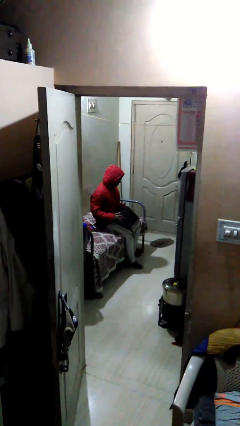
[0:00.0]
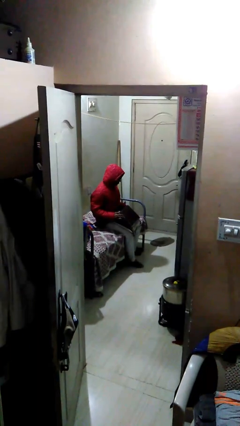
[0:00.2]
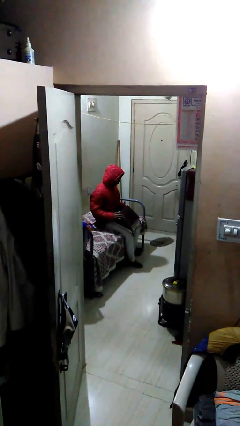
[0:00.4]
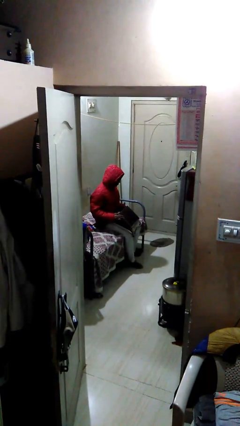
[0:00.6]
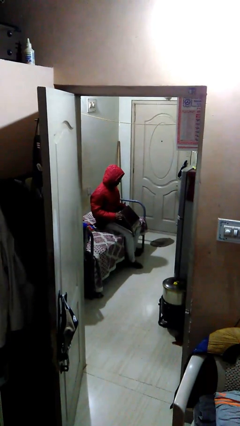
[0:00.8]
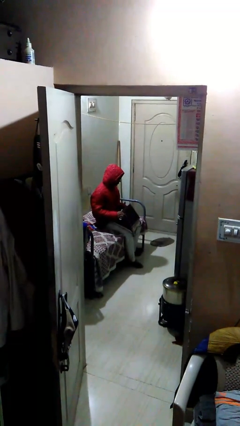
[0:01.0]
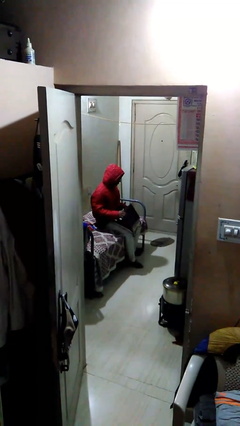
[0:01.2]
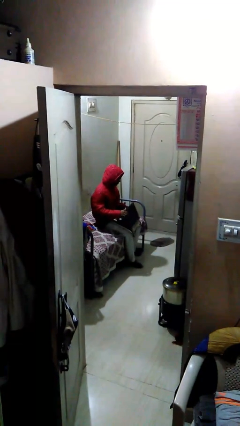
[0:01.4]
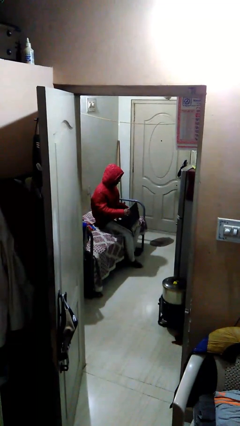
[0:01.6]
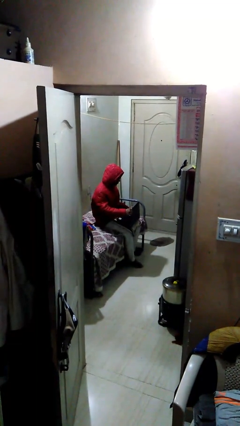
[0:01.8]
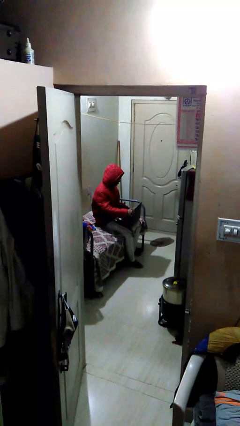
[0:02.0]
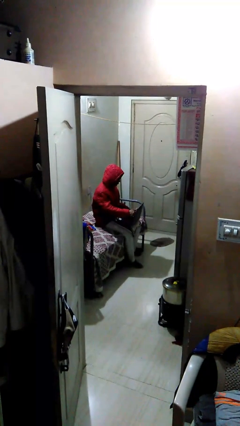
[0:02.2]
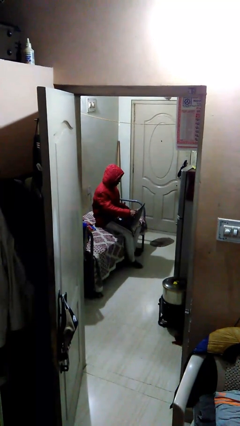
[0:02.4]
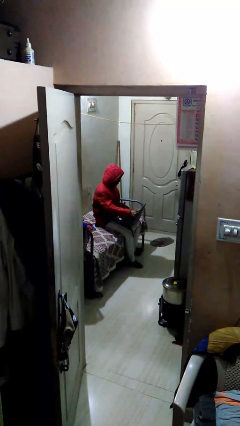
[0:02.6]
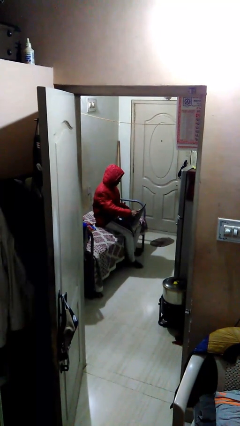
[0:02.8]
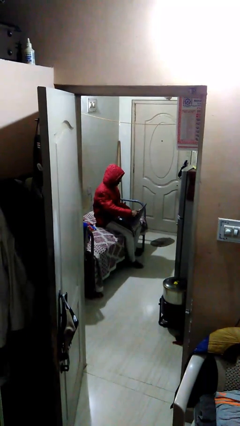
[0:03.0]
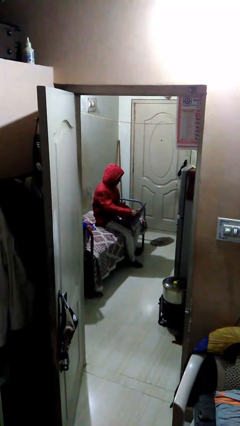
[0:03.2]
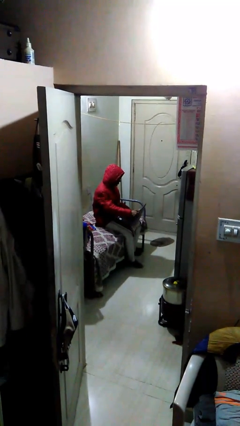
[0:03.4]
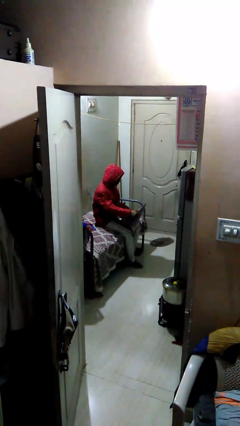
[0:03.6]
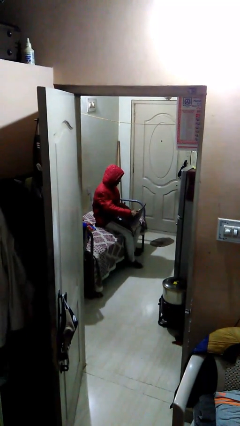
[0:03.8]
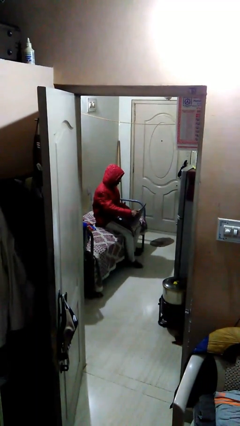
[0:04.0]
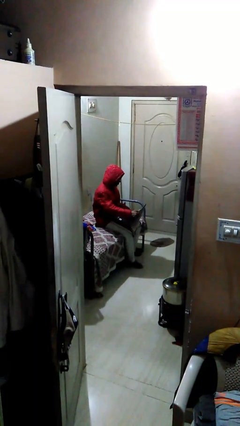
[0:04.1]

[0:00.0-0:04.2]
person interacts with laptop

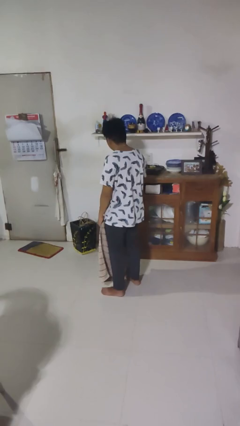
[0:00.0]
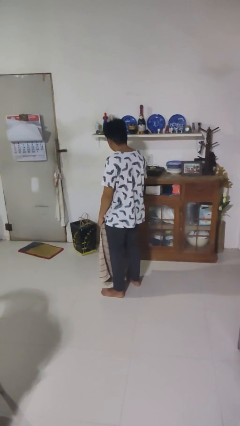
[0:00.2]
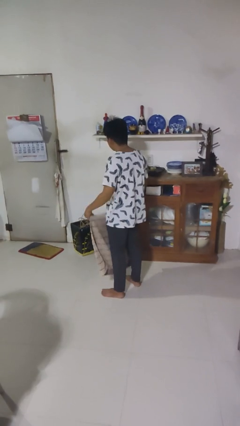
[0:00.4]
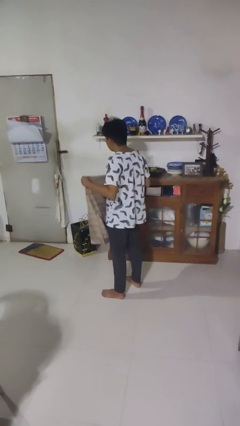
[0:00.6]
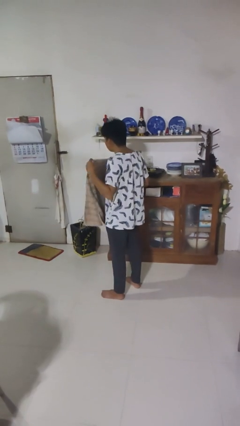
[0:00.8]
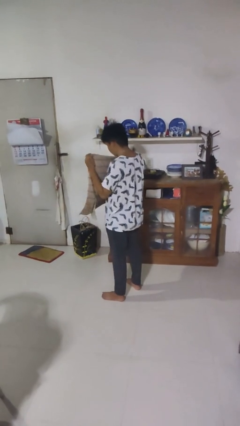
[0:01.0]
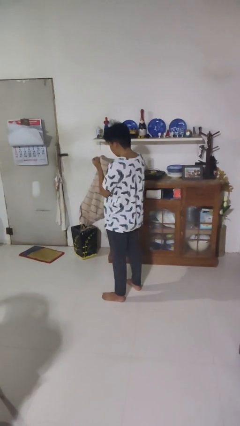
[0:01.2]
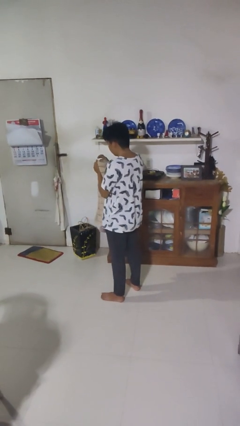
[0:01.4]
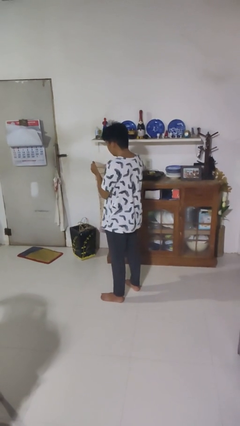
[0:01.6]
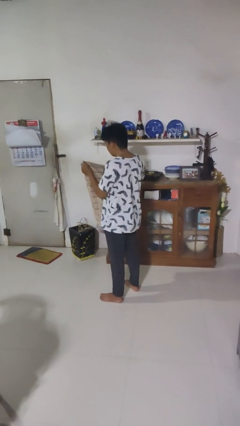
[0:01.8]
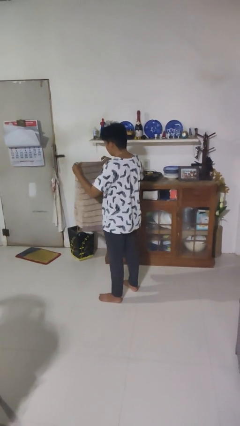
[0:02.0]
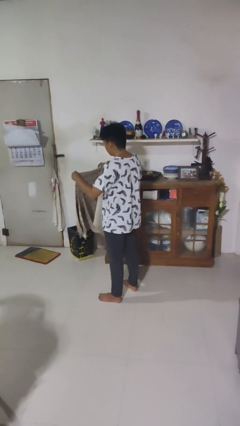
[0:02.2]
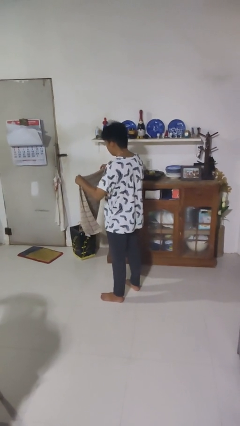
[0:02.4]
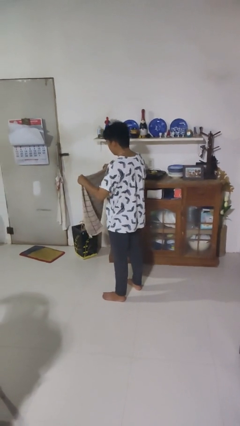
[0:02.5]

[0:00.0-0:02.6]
person folds blanket

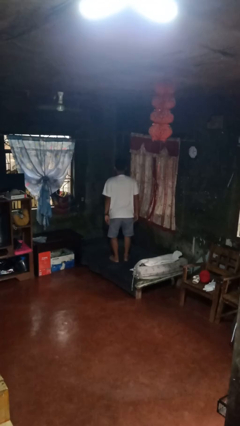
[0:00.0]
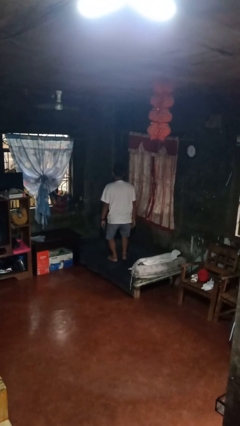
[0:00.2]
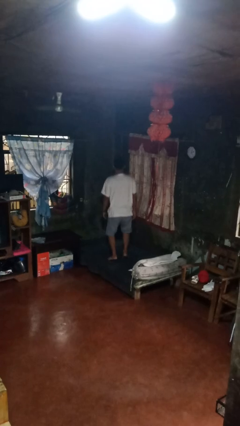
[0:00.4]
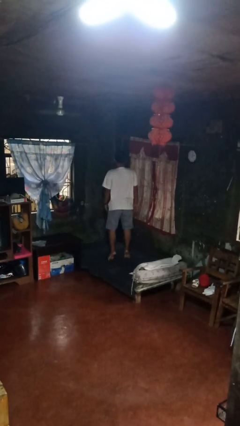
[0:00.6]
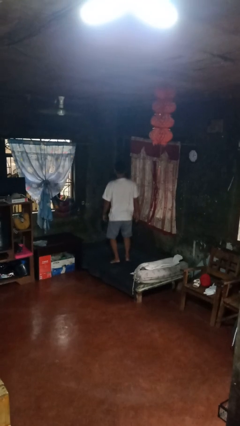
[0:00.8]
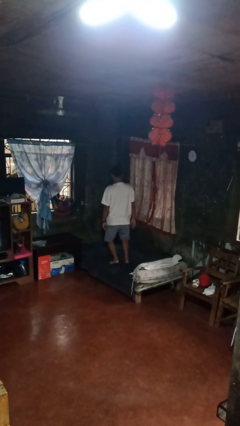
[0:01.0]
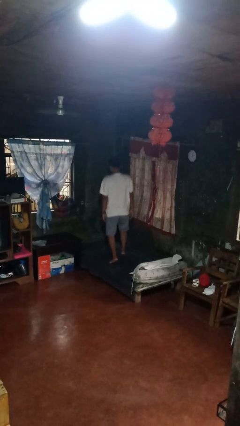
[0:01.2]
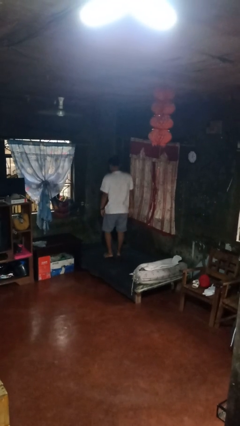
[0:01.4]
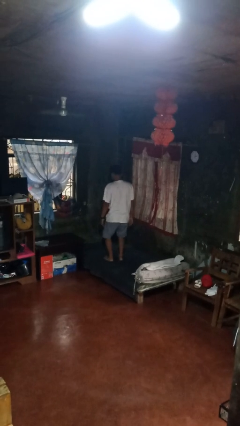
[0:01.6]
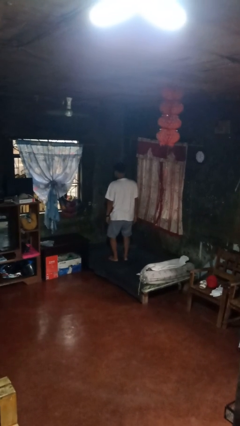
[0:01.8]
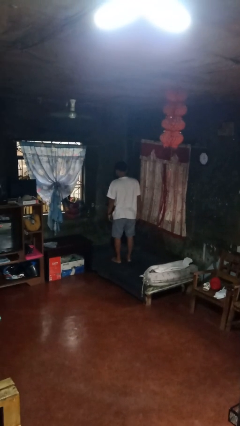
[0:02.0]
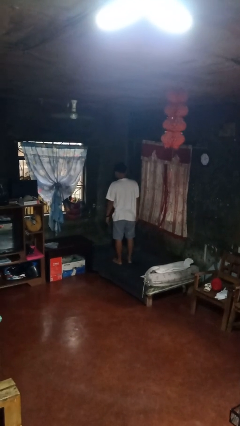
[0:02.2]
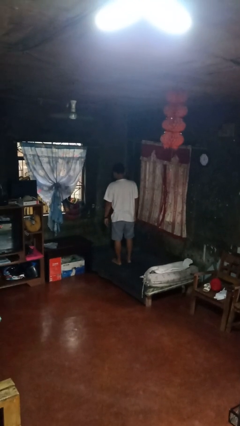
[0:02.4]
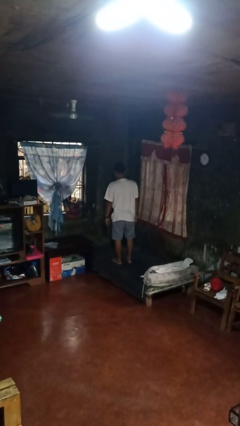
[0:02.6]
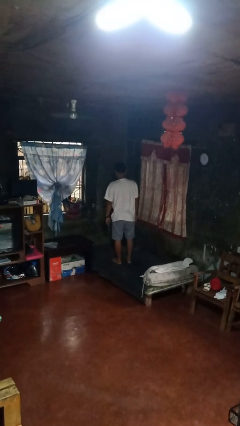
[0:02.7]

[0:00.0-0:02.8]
person jumps on bed

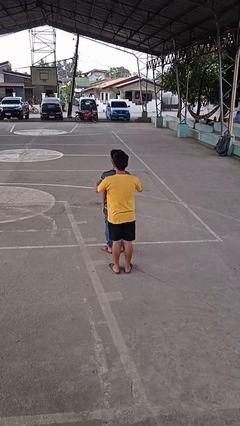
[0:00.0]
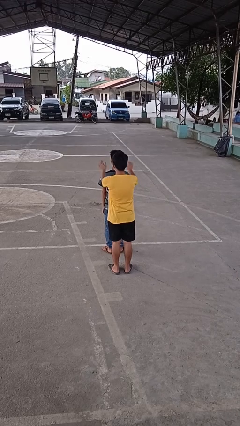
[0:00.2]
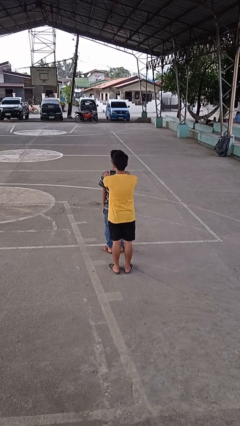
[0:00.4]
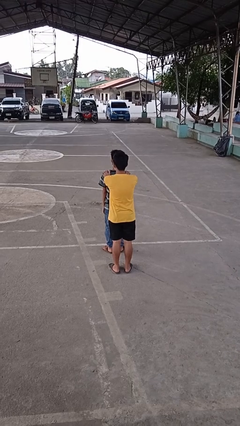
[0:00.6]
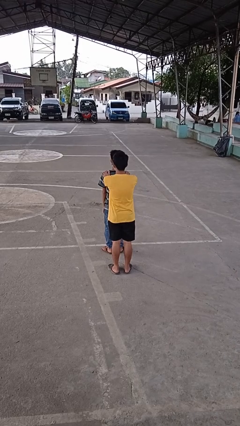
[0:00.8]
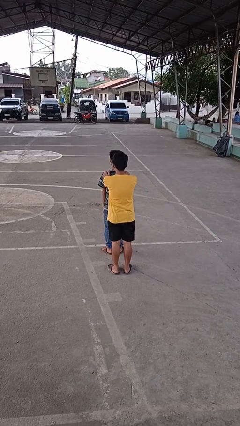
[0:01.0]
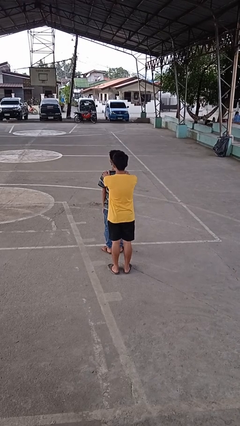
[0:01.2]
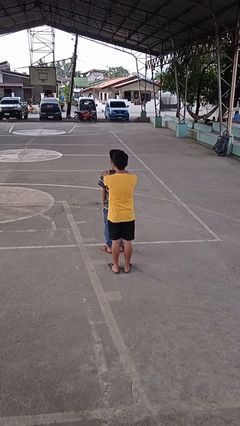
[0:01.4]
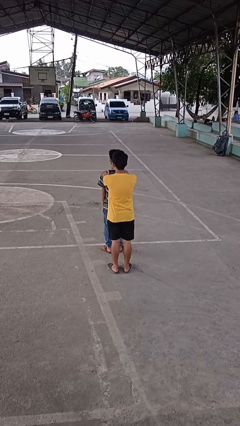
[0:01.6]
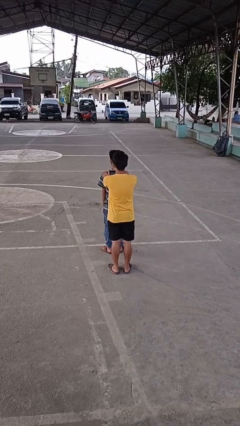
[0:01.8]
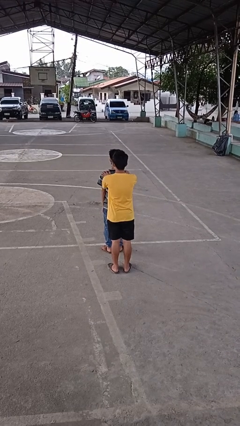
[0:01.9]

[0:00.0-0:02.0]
person grabs person by shoulder

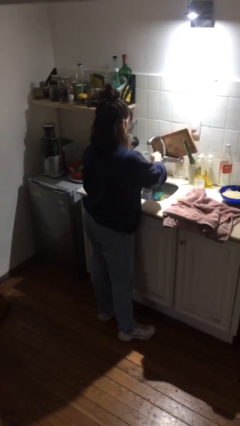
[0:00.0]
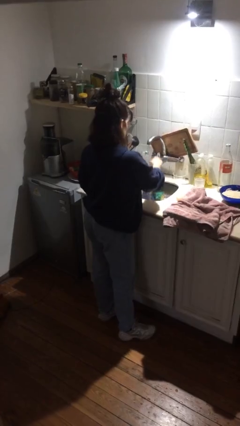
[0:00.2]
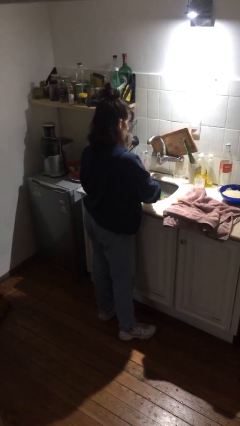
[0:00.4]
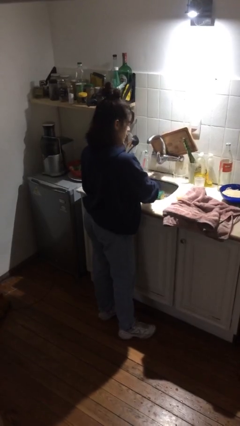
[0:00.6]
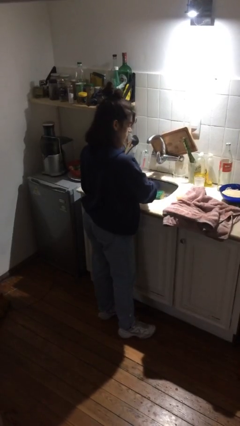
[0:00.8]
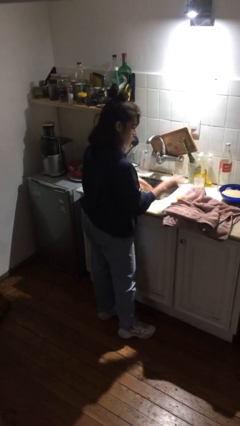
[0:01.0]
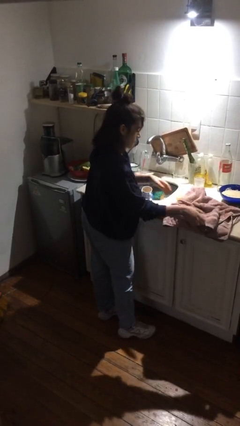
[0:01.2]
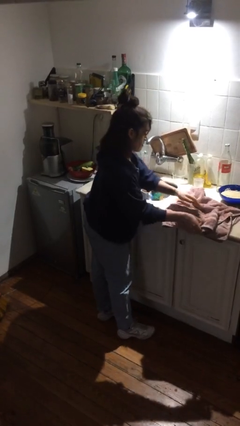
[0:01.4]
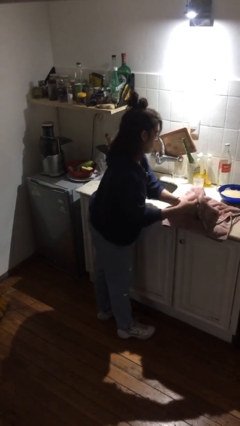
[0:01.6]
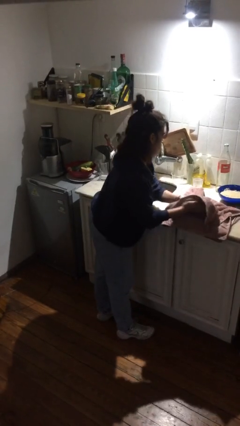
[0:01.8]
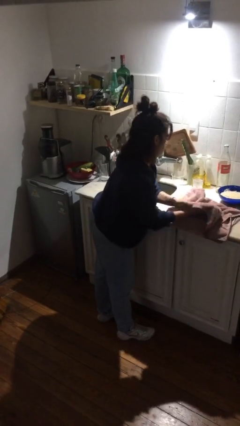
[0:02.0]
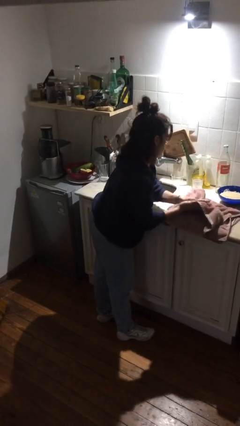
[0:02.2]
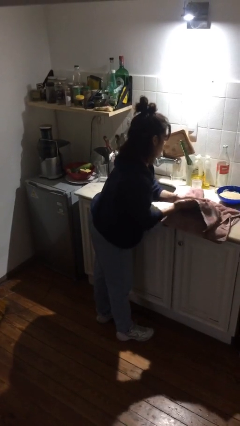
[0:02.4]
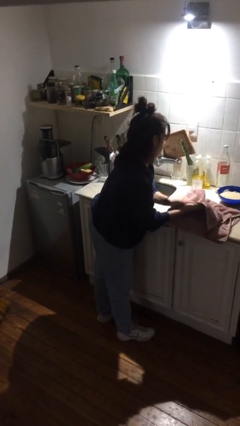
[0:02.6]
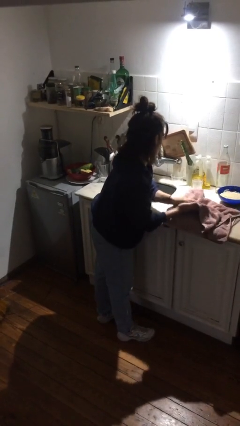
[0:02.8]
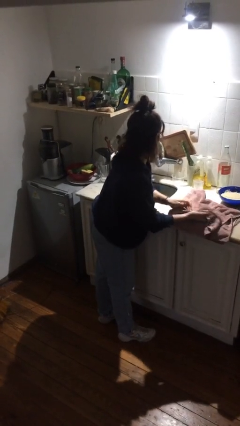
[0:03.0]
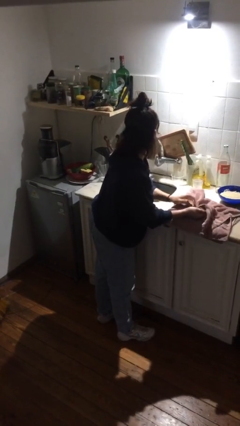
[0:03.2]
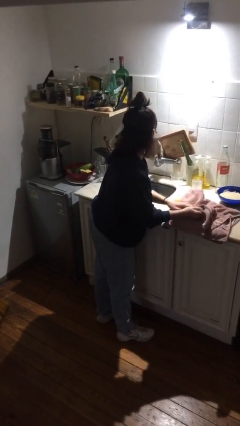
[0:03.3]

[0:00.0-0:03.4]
person dries hands with towel

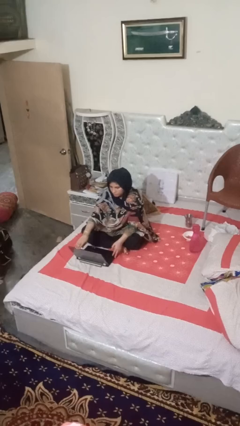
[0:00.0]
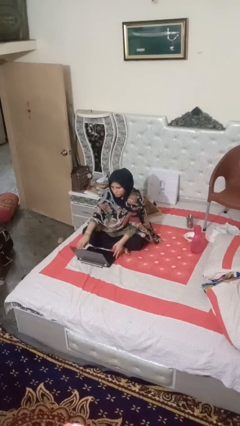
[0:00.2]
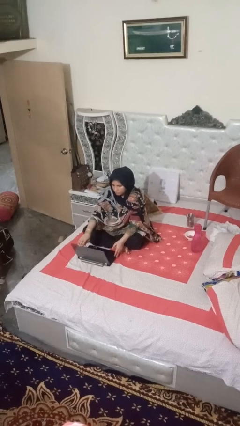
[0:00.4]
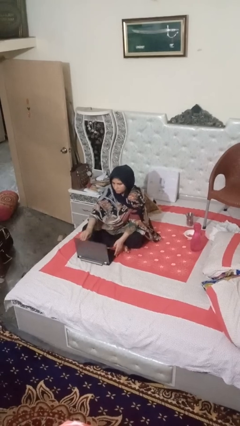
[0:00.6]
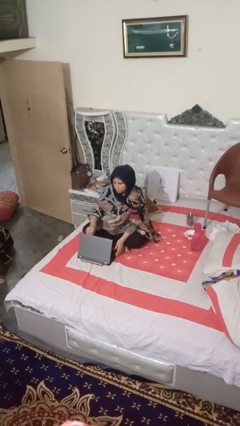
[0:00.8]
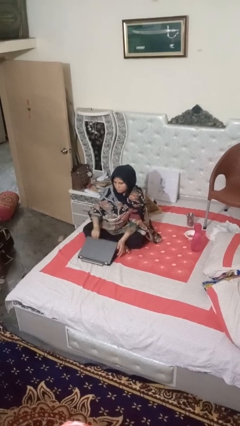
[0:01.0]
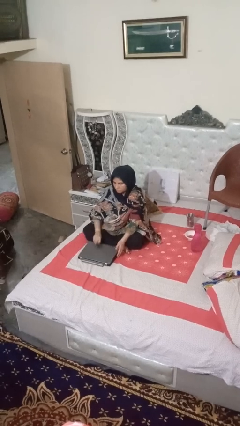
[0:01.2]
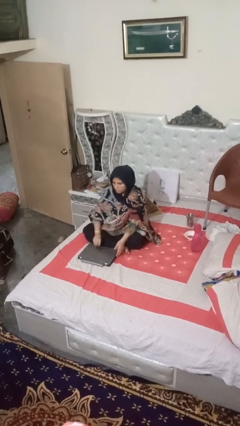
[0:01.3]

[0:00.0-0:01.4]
person closes laptop

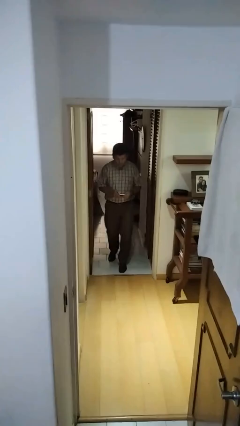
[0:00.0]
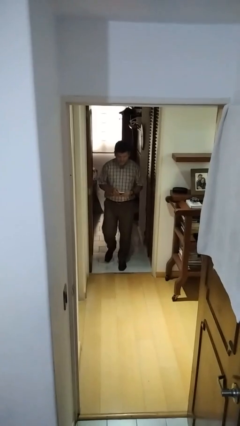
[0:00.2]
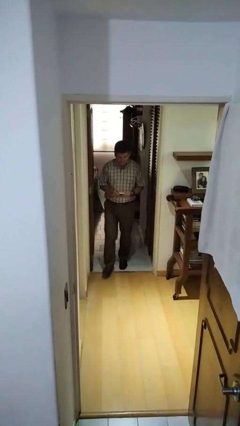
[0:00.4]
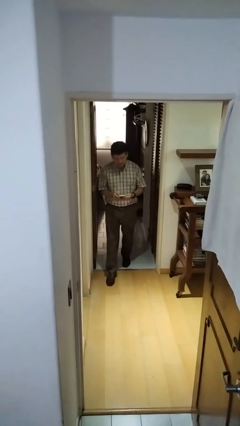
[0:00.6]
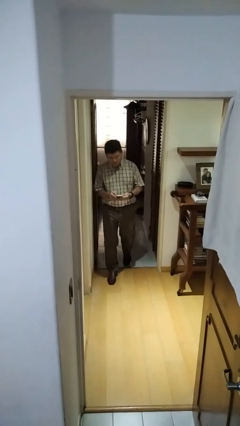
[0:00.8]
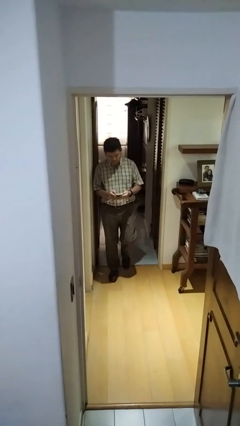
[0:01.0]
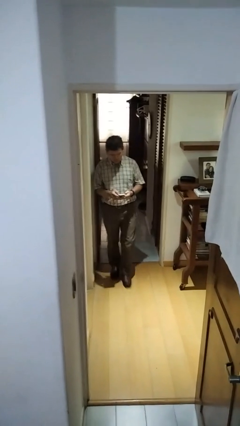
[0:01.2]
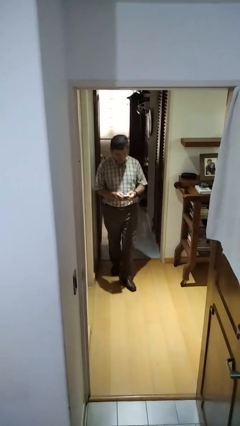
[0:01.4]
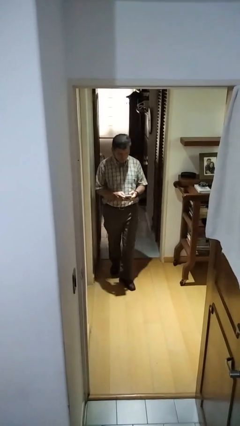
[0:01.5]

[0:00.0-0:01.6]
person enters scene through structure
